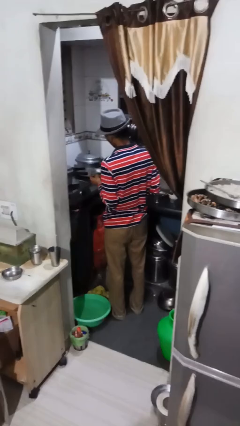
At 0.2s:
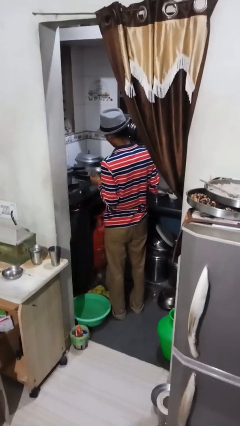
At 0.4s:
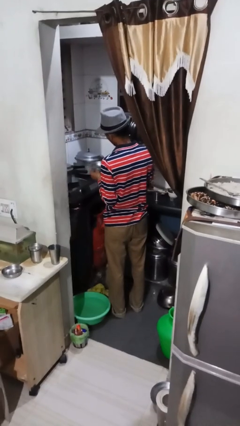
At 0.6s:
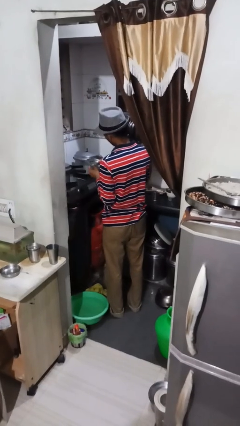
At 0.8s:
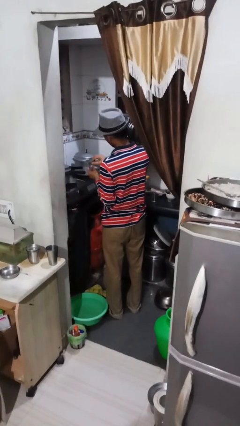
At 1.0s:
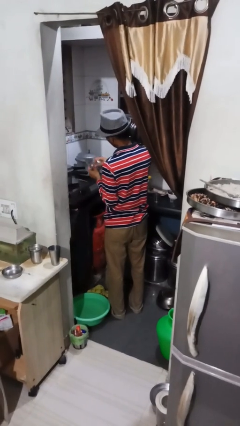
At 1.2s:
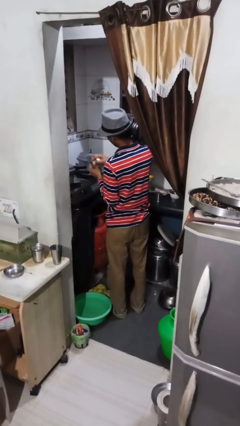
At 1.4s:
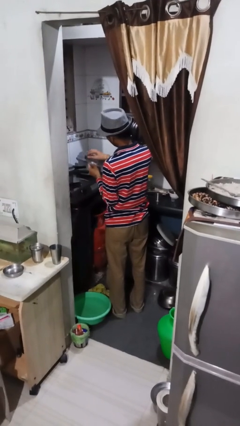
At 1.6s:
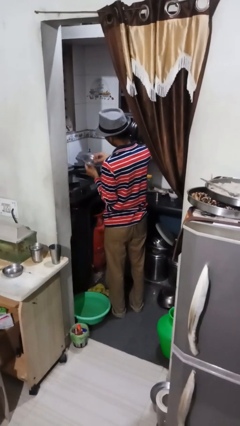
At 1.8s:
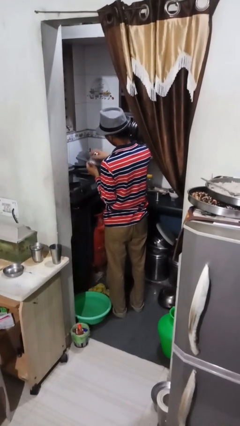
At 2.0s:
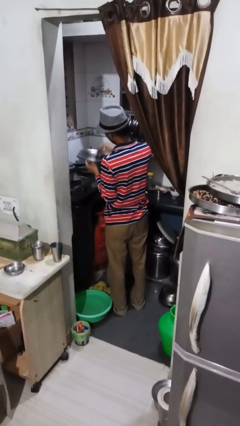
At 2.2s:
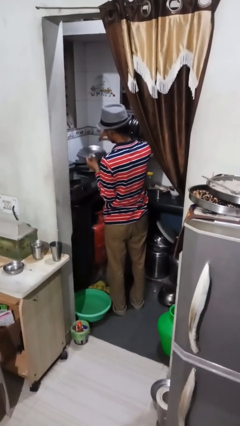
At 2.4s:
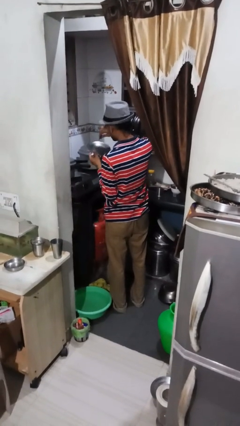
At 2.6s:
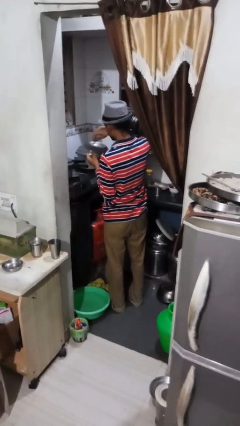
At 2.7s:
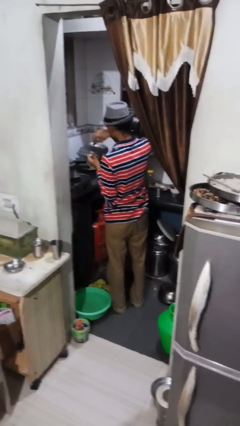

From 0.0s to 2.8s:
person washes dish

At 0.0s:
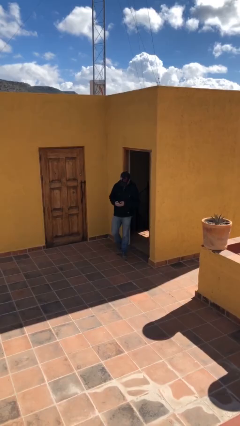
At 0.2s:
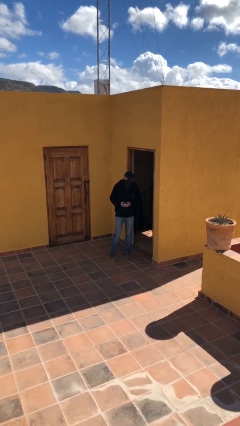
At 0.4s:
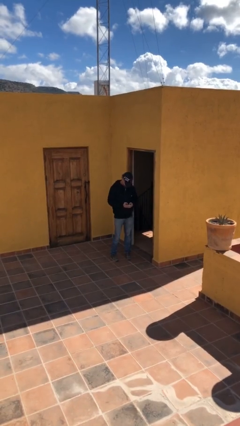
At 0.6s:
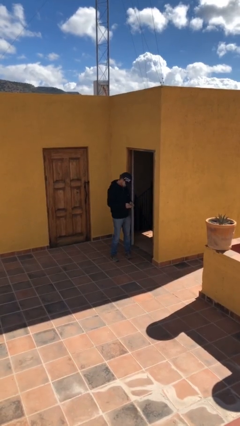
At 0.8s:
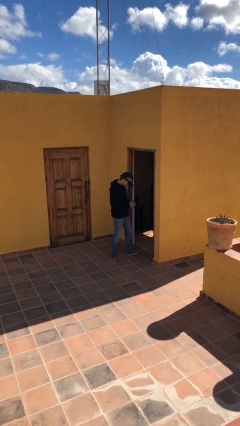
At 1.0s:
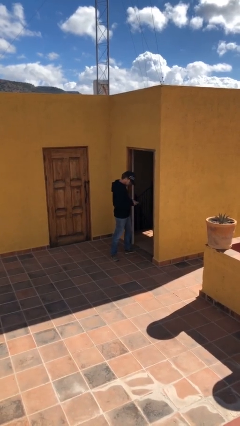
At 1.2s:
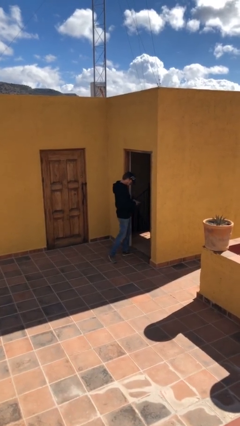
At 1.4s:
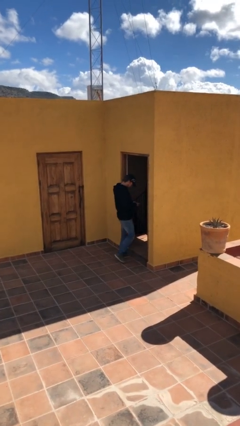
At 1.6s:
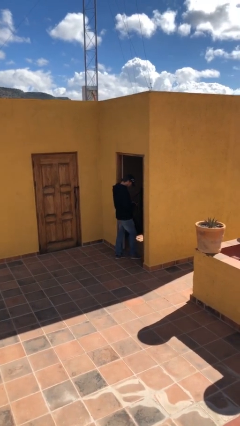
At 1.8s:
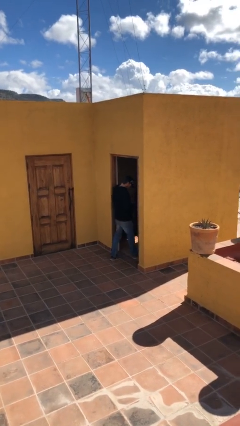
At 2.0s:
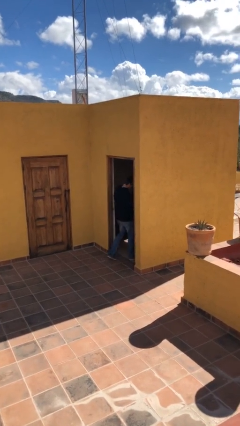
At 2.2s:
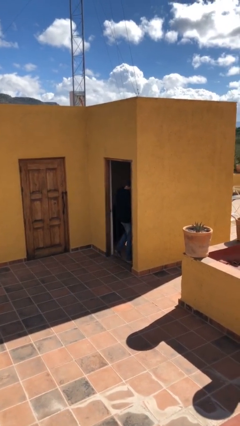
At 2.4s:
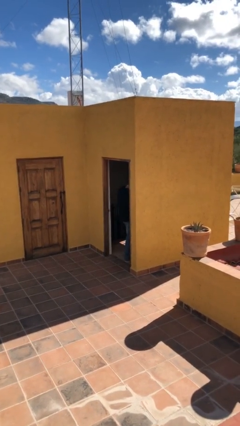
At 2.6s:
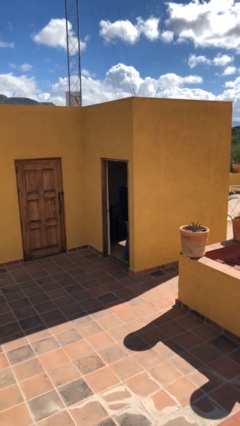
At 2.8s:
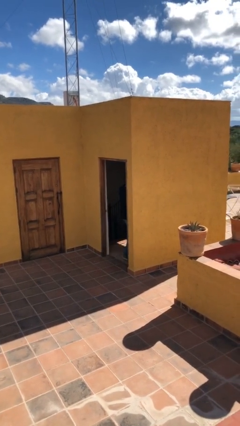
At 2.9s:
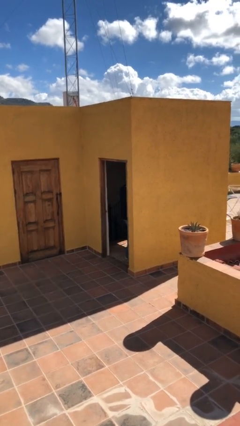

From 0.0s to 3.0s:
person exits scene through structure

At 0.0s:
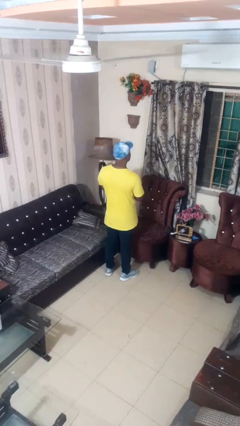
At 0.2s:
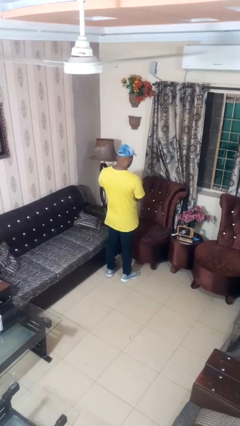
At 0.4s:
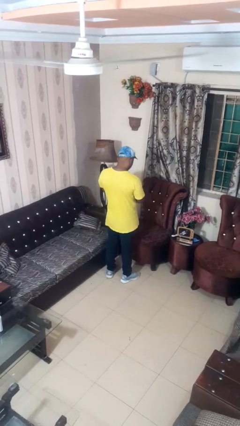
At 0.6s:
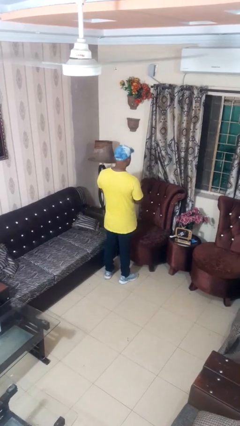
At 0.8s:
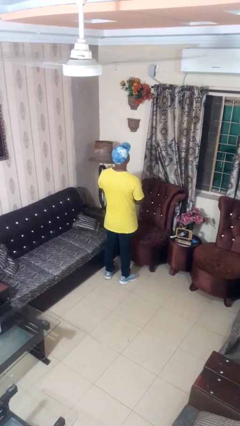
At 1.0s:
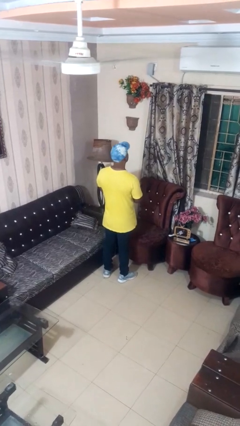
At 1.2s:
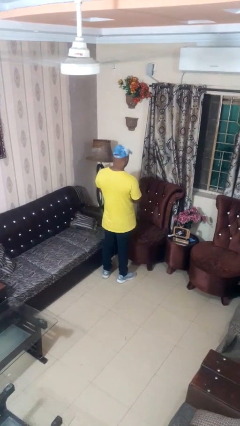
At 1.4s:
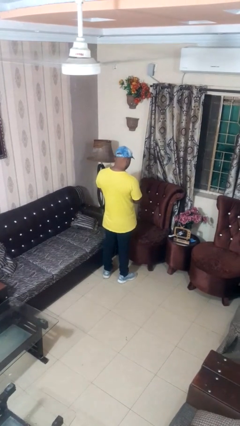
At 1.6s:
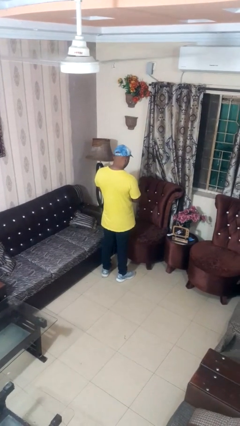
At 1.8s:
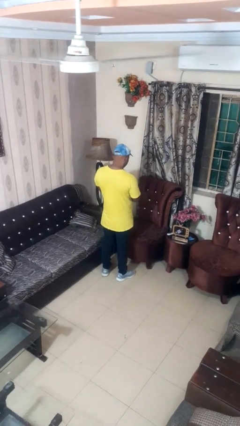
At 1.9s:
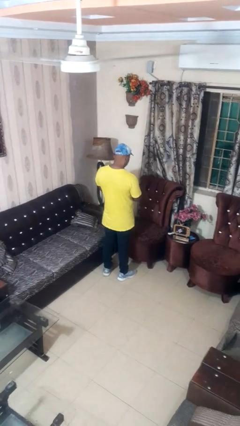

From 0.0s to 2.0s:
person shakes head

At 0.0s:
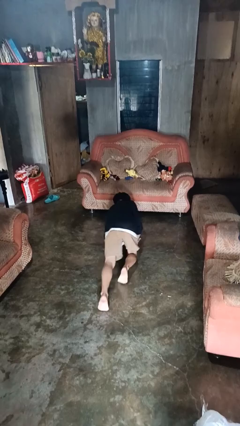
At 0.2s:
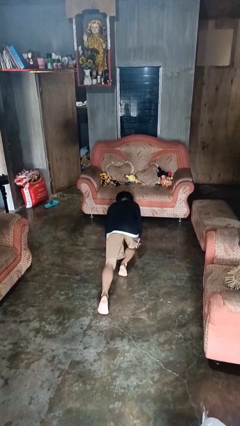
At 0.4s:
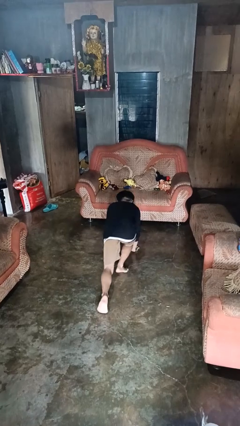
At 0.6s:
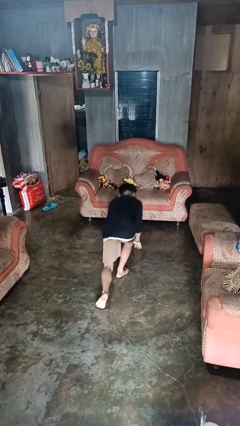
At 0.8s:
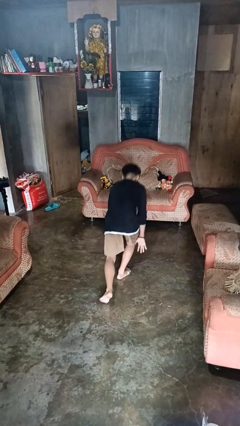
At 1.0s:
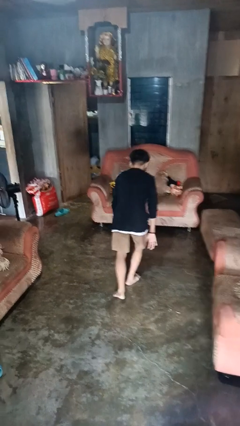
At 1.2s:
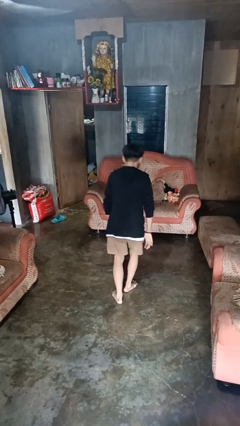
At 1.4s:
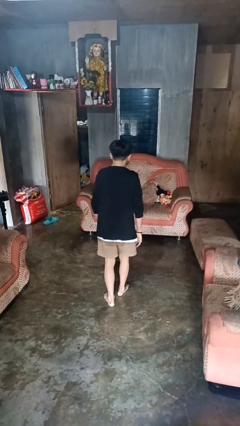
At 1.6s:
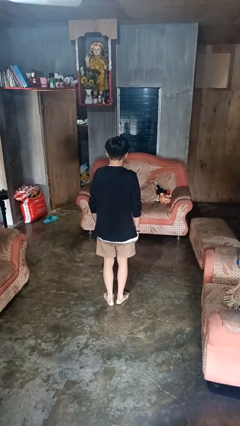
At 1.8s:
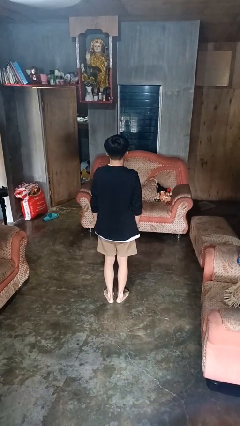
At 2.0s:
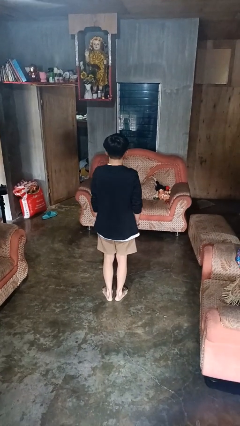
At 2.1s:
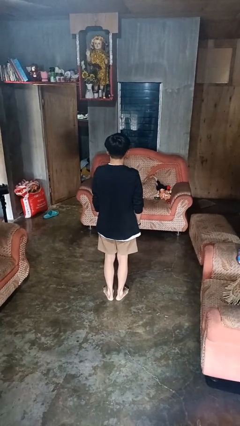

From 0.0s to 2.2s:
person stands up from floor

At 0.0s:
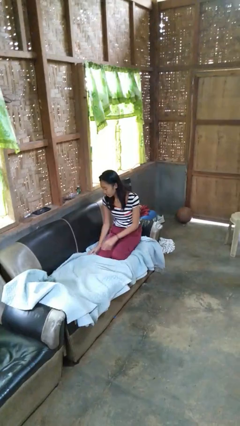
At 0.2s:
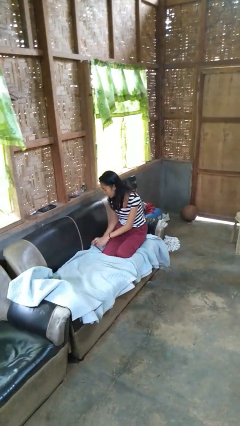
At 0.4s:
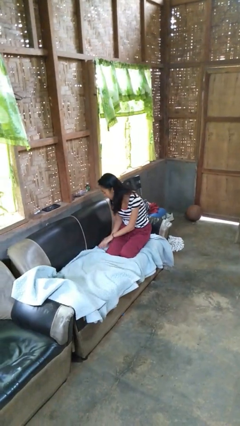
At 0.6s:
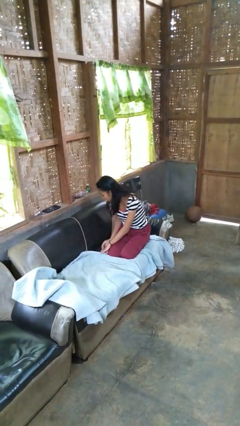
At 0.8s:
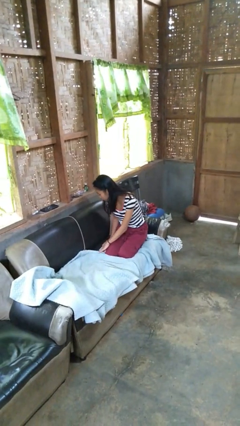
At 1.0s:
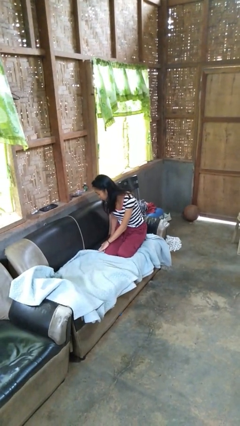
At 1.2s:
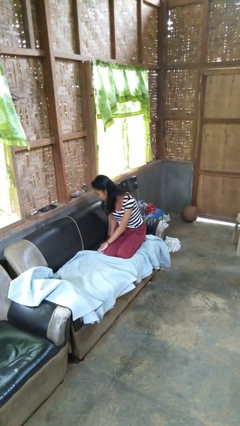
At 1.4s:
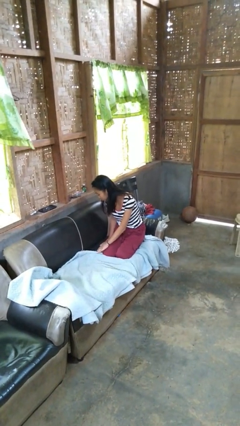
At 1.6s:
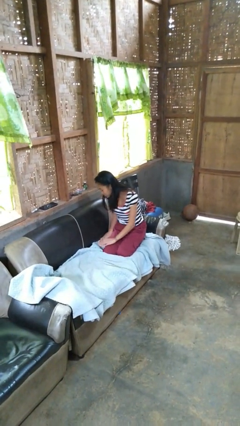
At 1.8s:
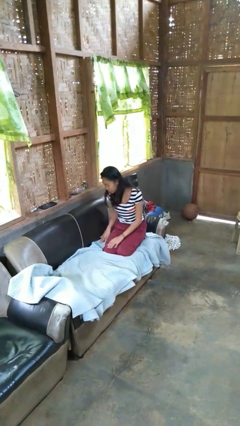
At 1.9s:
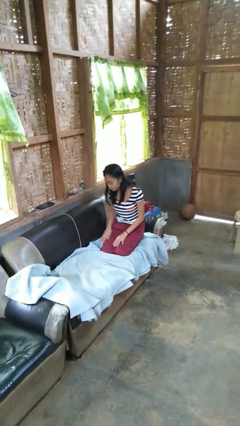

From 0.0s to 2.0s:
person searches in couch

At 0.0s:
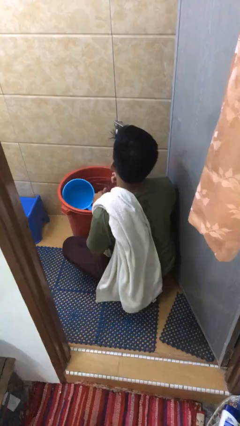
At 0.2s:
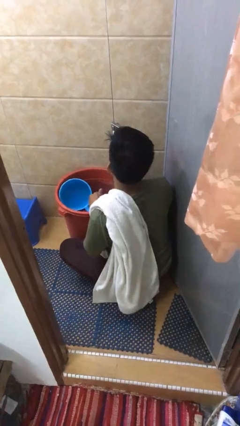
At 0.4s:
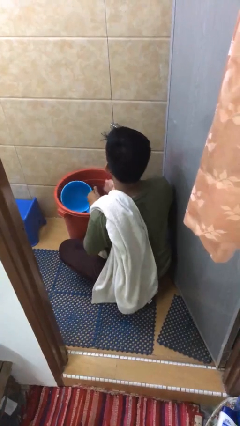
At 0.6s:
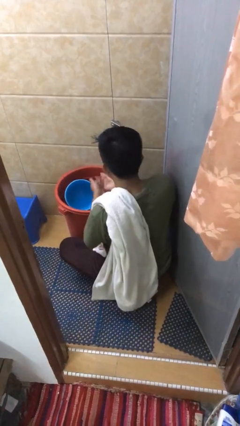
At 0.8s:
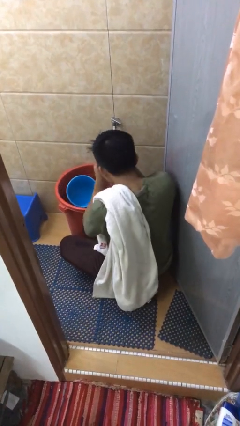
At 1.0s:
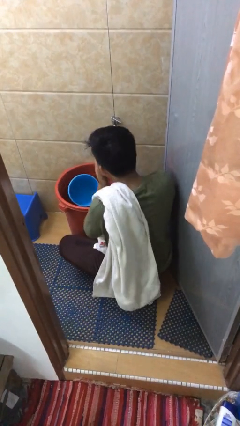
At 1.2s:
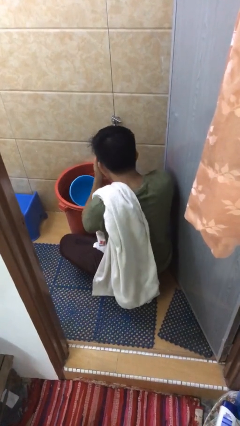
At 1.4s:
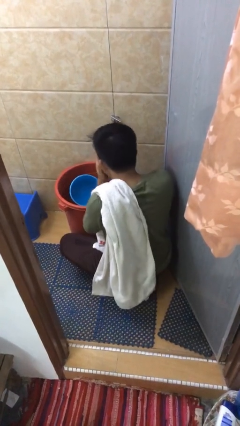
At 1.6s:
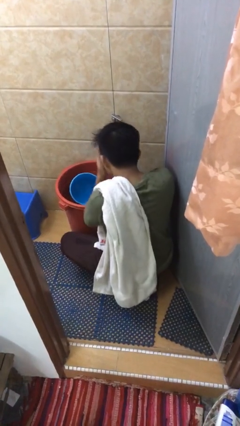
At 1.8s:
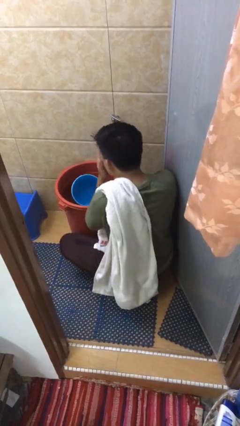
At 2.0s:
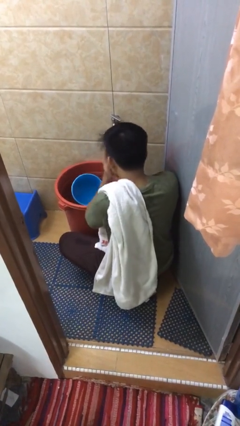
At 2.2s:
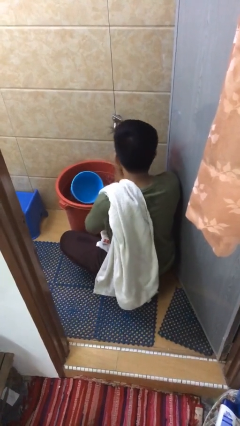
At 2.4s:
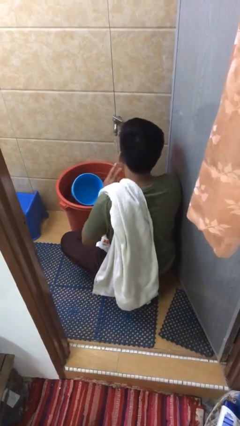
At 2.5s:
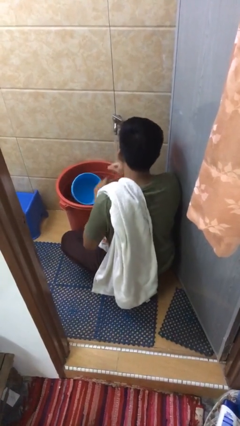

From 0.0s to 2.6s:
person washes face

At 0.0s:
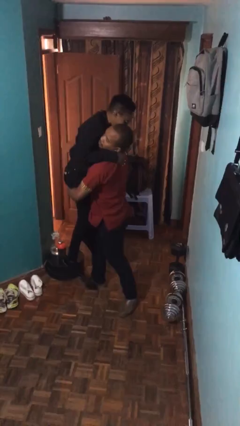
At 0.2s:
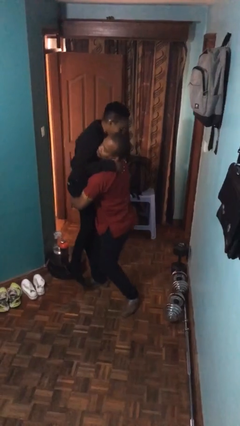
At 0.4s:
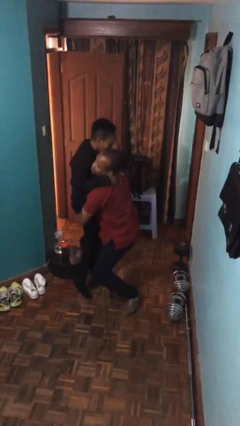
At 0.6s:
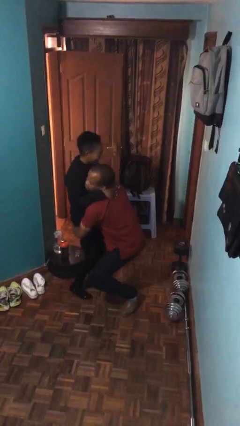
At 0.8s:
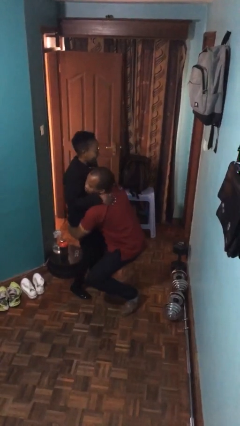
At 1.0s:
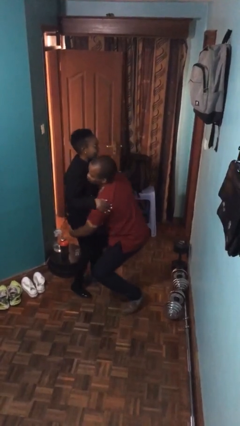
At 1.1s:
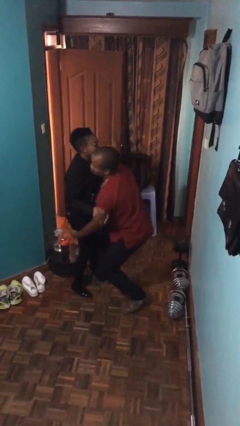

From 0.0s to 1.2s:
person puts down person

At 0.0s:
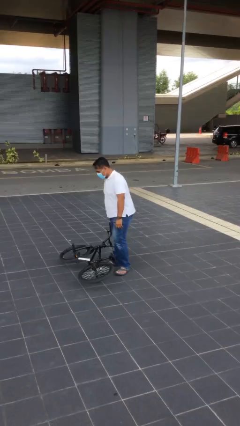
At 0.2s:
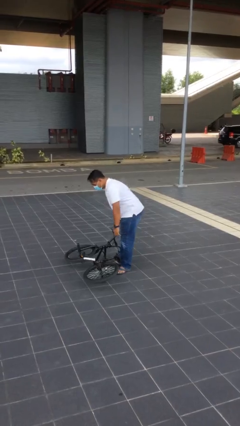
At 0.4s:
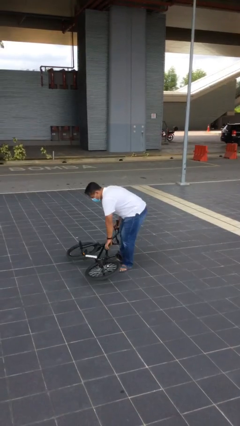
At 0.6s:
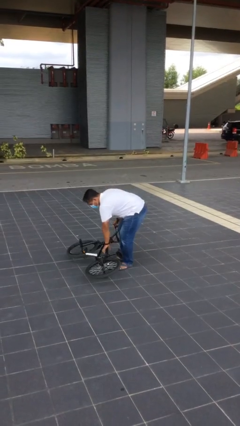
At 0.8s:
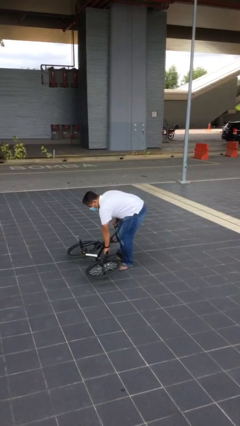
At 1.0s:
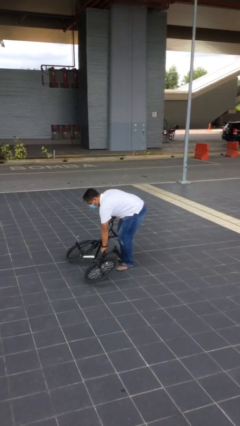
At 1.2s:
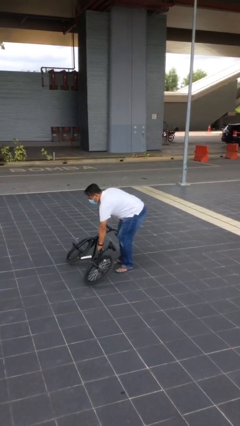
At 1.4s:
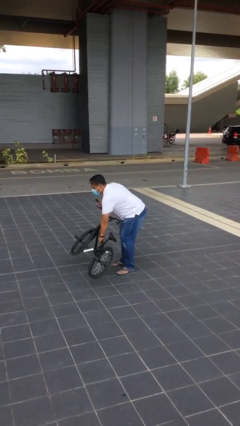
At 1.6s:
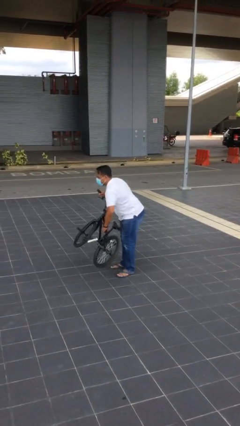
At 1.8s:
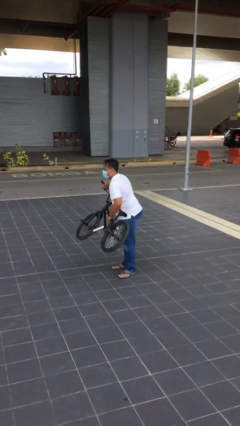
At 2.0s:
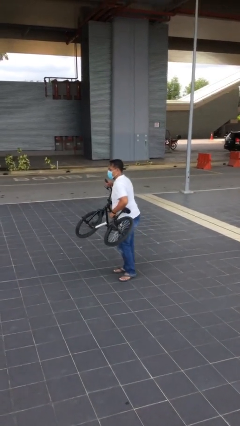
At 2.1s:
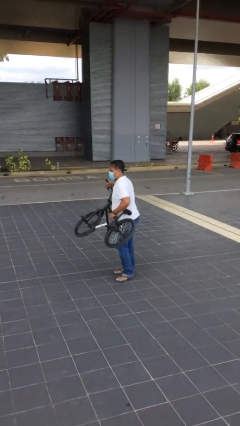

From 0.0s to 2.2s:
person picks up object from floor
